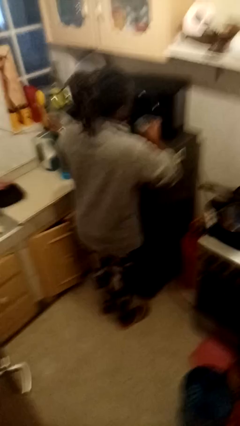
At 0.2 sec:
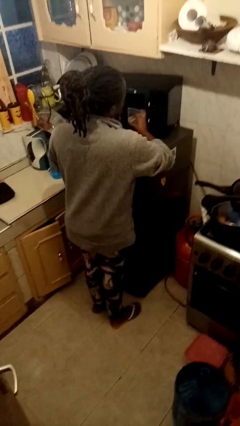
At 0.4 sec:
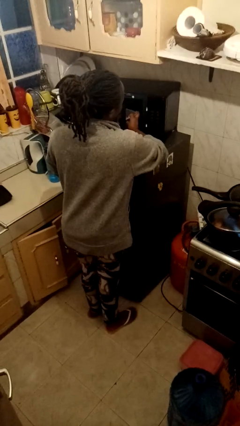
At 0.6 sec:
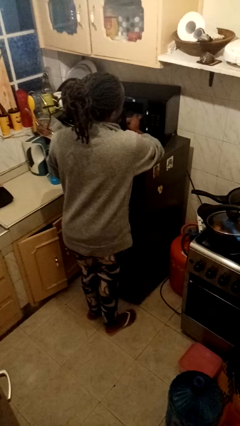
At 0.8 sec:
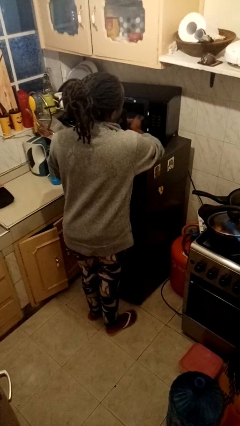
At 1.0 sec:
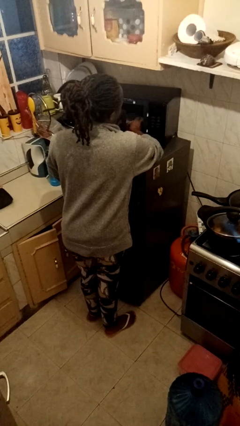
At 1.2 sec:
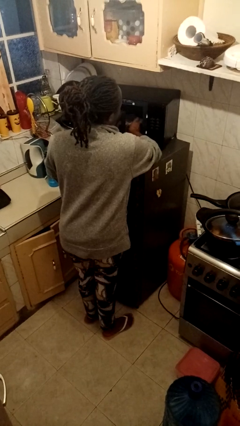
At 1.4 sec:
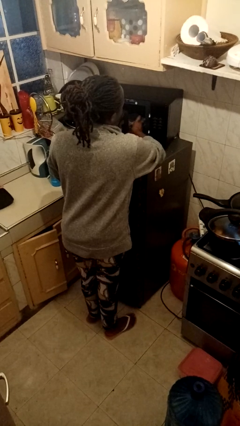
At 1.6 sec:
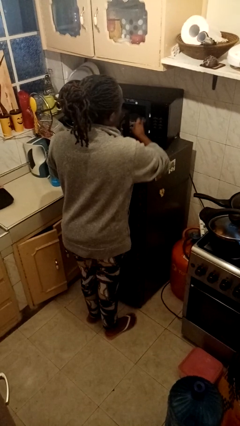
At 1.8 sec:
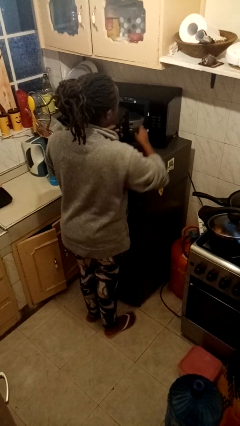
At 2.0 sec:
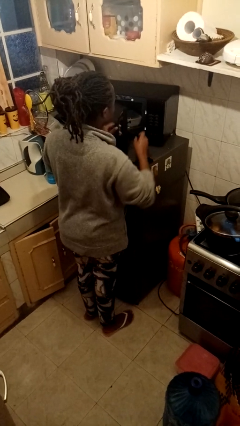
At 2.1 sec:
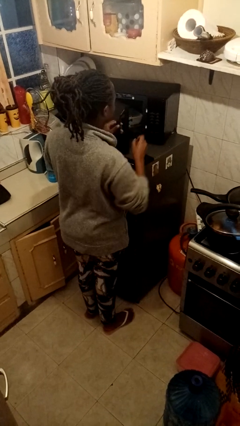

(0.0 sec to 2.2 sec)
person puts object into microwave

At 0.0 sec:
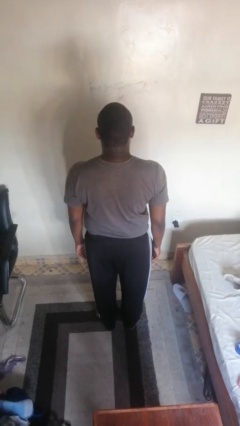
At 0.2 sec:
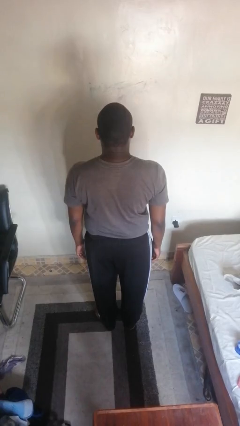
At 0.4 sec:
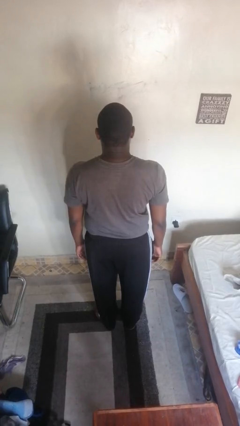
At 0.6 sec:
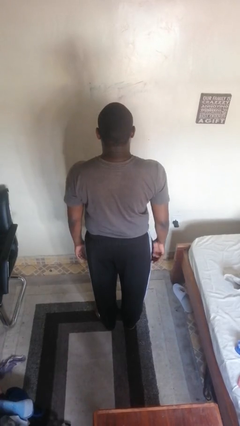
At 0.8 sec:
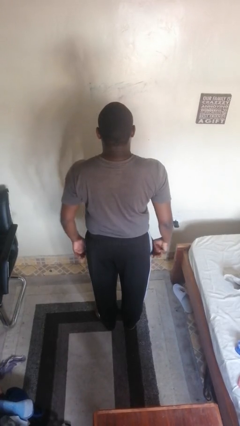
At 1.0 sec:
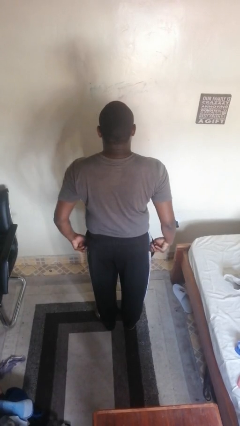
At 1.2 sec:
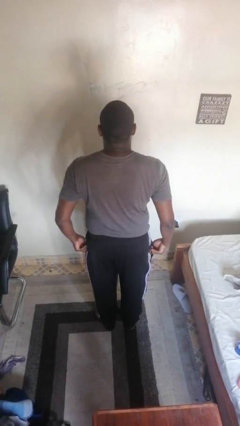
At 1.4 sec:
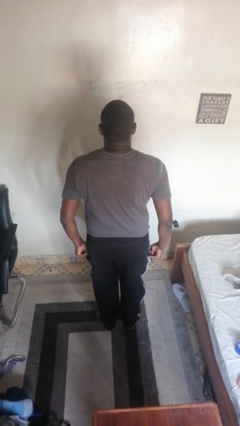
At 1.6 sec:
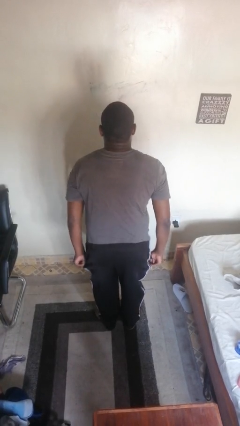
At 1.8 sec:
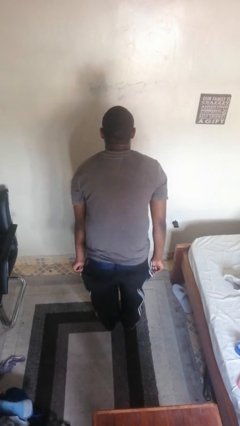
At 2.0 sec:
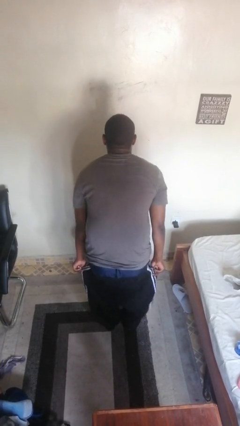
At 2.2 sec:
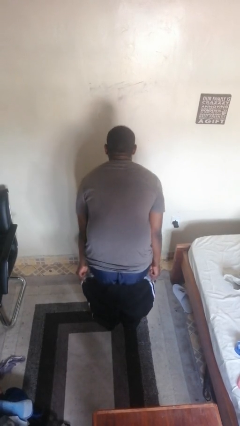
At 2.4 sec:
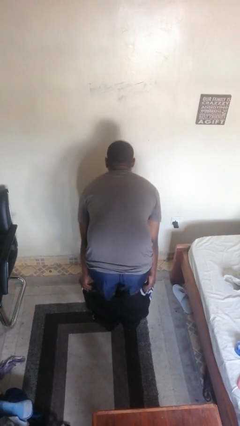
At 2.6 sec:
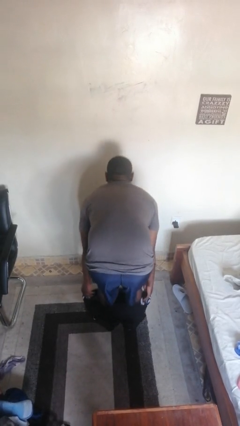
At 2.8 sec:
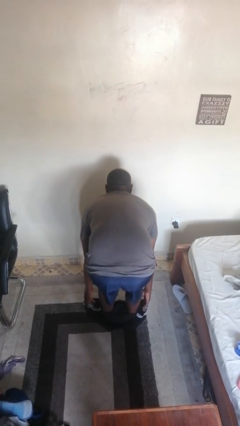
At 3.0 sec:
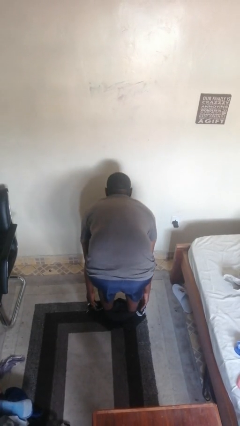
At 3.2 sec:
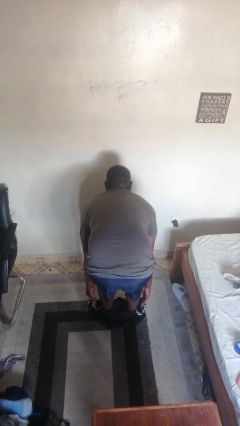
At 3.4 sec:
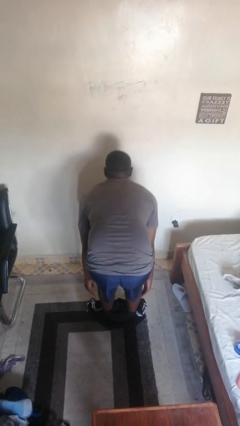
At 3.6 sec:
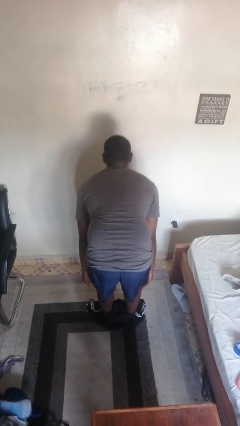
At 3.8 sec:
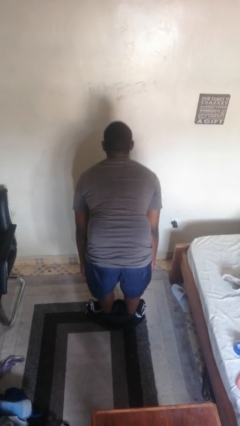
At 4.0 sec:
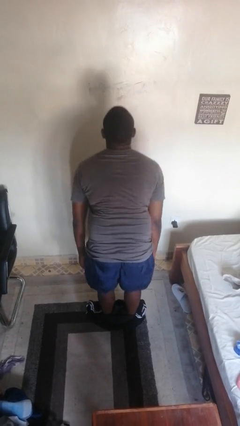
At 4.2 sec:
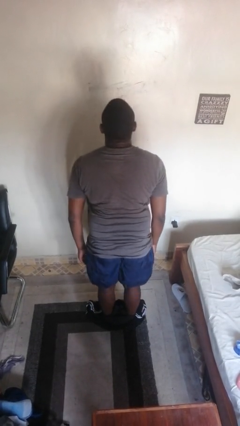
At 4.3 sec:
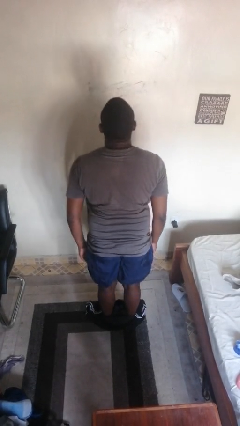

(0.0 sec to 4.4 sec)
person takes off pants

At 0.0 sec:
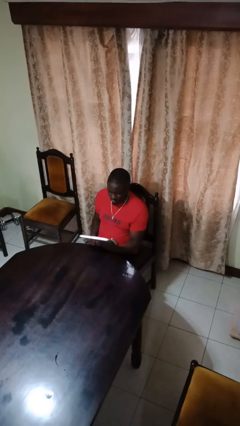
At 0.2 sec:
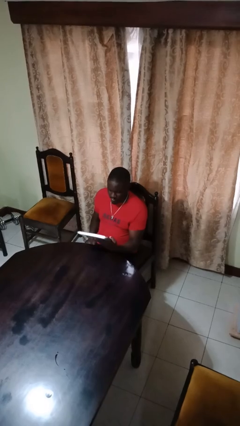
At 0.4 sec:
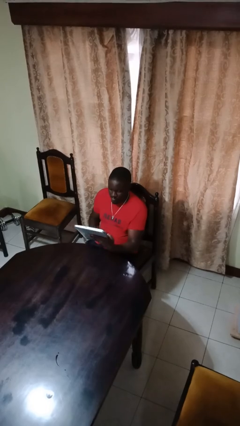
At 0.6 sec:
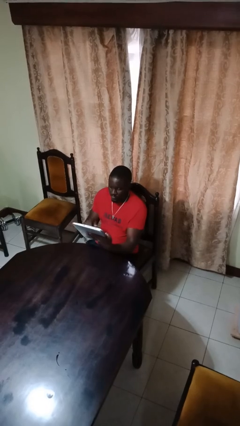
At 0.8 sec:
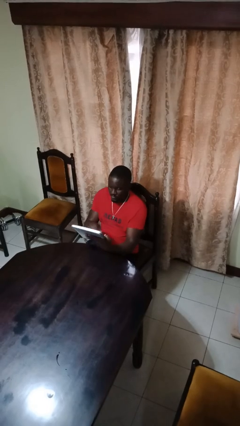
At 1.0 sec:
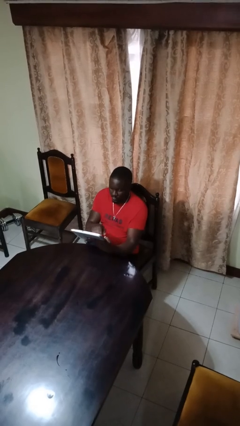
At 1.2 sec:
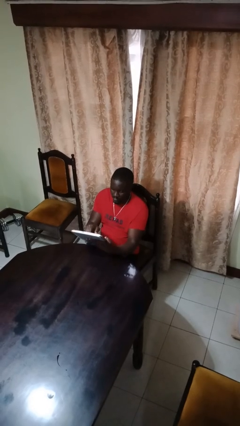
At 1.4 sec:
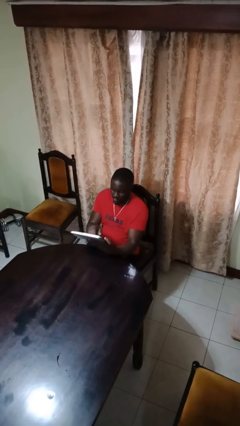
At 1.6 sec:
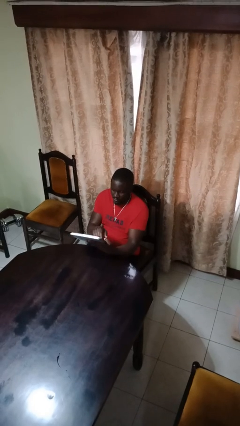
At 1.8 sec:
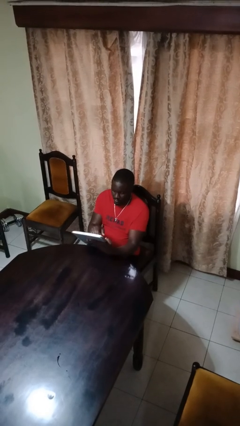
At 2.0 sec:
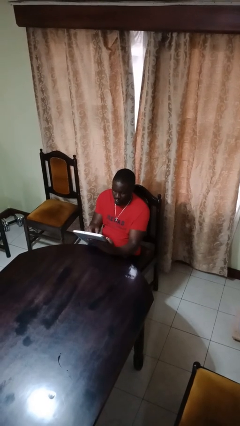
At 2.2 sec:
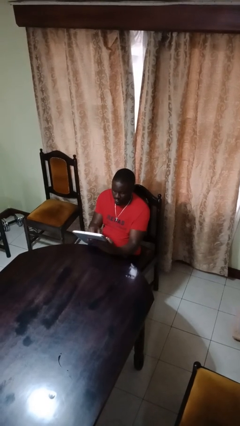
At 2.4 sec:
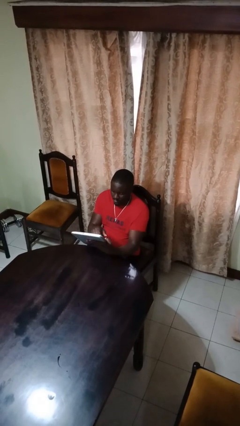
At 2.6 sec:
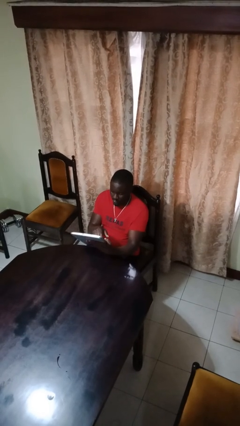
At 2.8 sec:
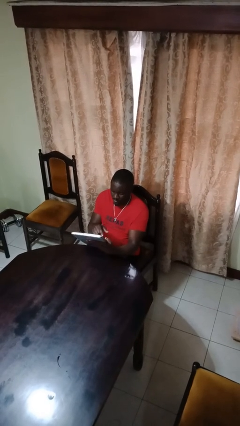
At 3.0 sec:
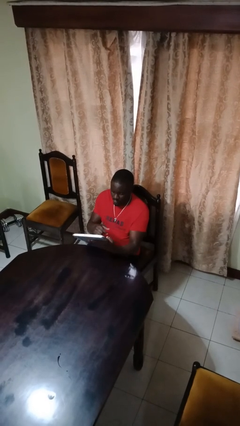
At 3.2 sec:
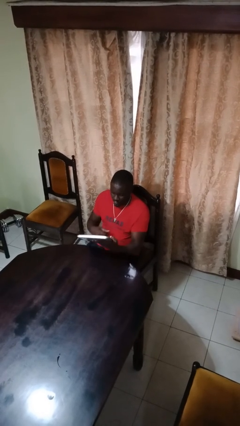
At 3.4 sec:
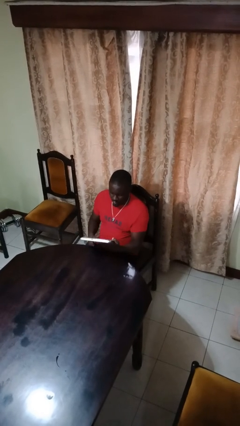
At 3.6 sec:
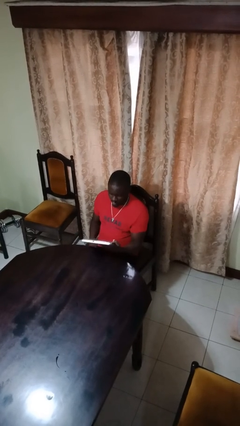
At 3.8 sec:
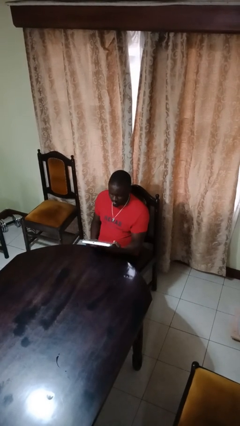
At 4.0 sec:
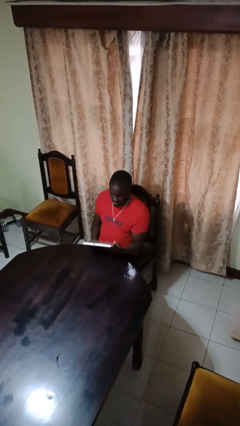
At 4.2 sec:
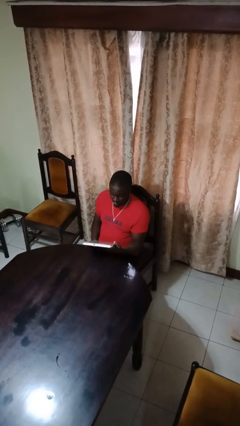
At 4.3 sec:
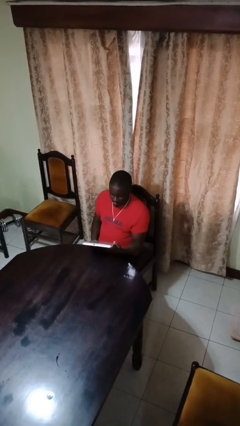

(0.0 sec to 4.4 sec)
person interacts with tablet

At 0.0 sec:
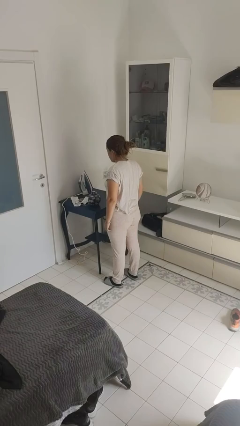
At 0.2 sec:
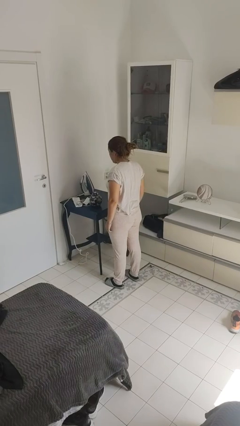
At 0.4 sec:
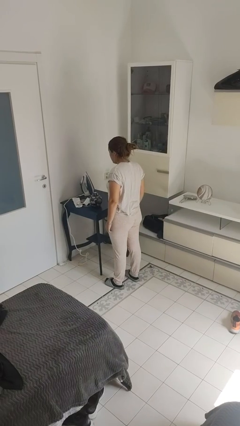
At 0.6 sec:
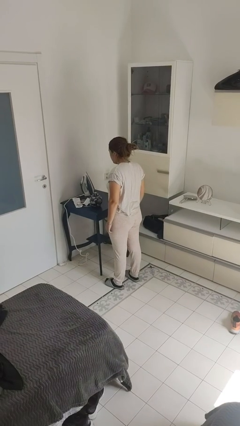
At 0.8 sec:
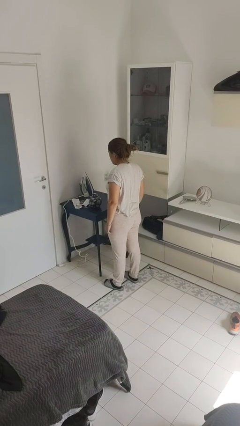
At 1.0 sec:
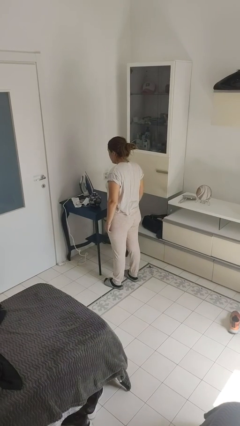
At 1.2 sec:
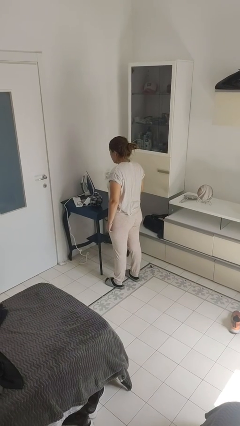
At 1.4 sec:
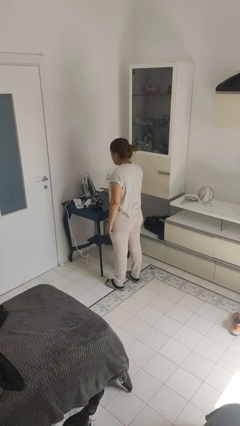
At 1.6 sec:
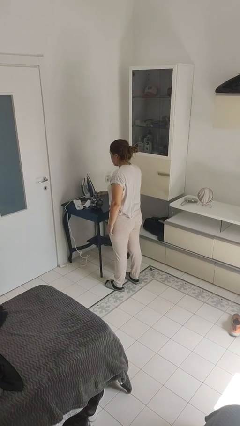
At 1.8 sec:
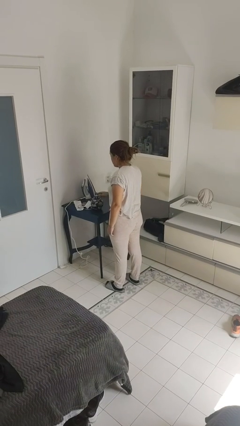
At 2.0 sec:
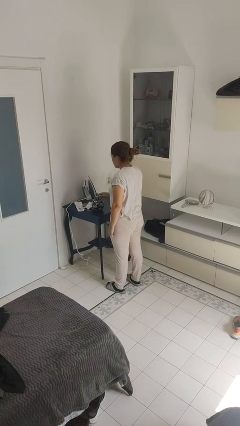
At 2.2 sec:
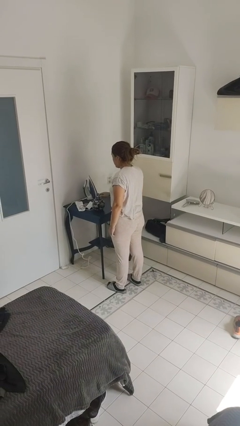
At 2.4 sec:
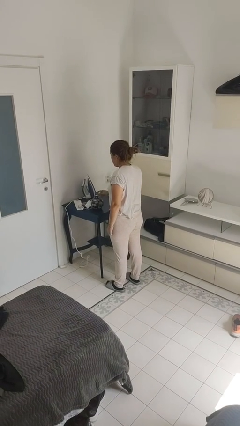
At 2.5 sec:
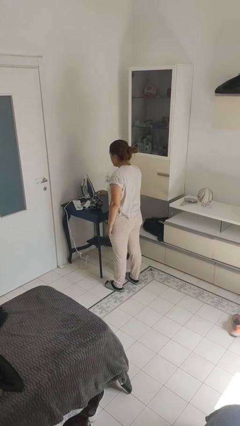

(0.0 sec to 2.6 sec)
person taps object with finger

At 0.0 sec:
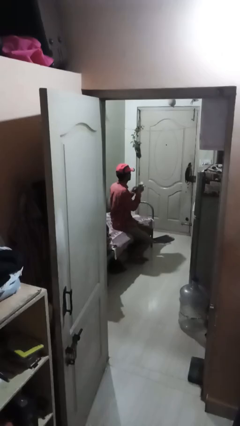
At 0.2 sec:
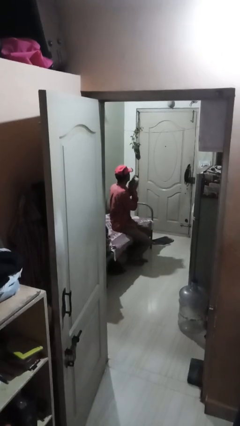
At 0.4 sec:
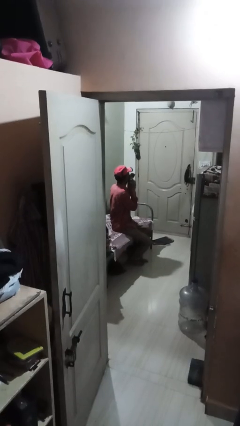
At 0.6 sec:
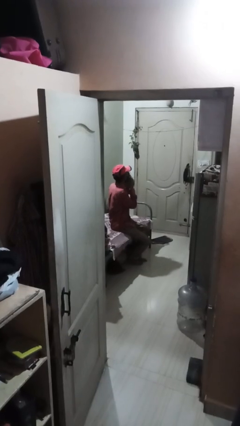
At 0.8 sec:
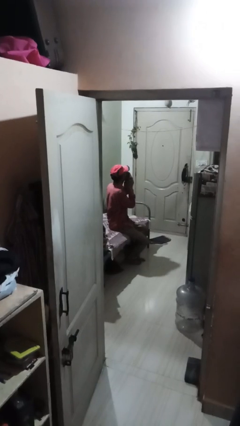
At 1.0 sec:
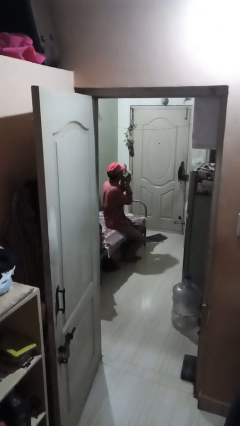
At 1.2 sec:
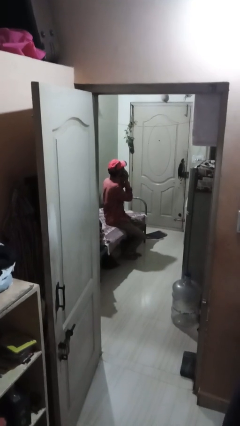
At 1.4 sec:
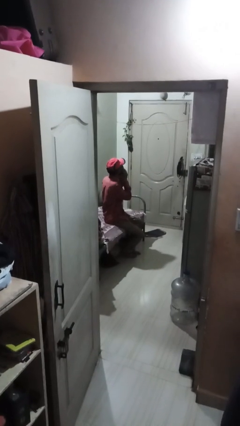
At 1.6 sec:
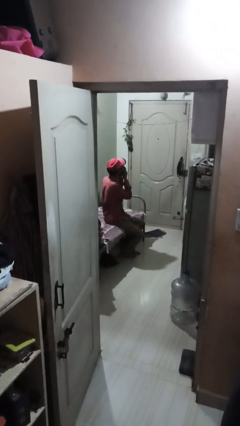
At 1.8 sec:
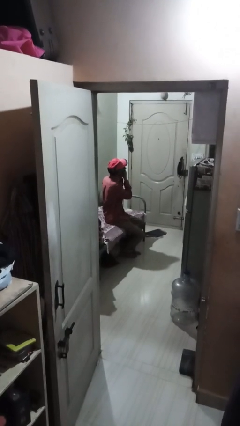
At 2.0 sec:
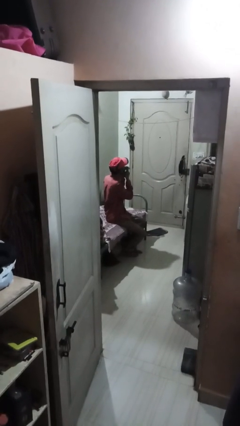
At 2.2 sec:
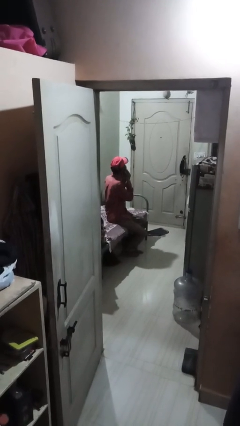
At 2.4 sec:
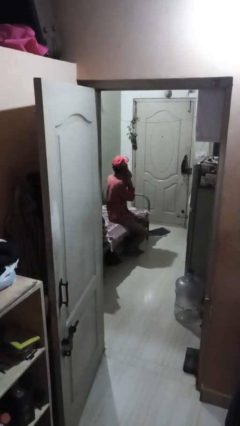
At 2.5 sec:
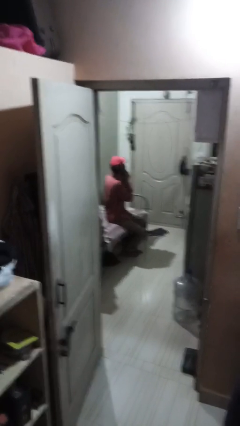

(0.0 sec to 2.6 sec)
person wipes mouth with napkin

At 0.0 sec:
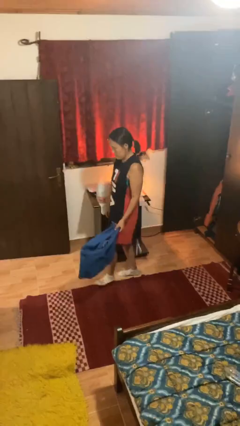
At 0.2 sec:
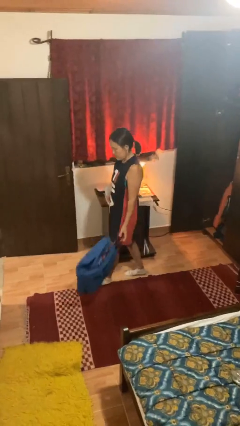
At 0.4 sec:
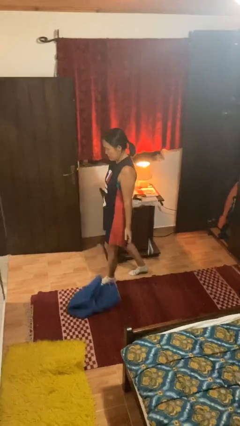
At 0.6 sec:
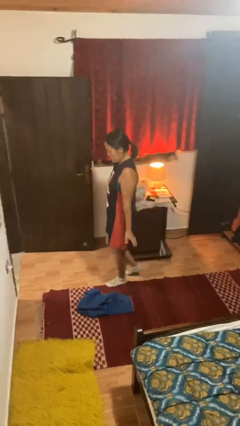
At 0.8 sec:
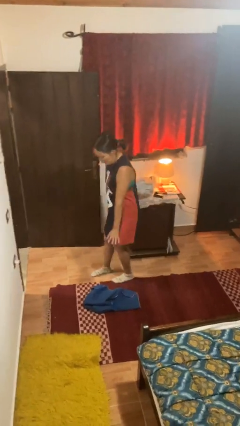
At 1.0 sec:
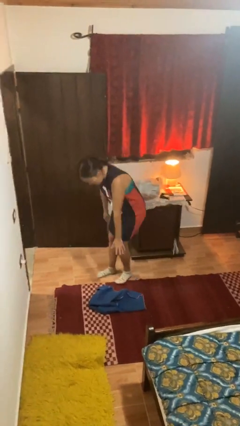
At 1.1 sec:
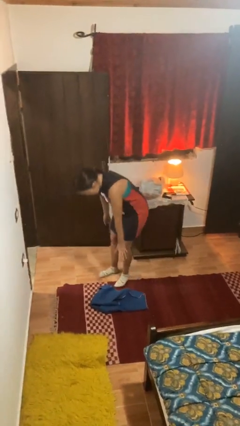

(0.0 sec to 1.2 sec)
person drops object
